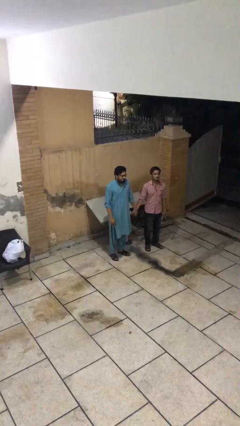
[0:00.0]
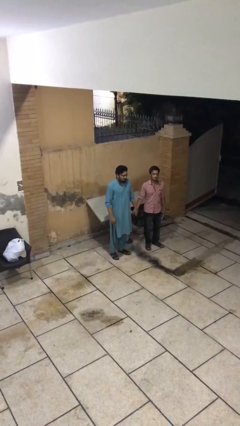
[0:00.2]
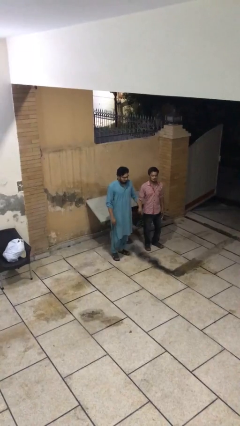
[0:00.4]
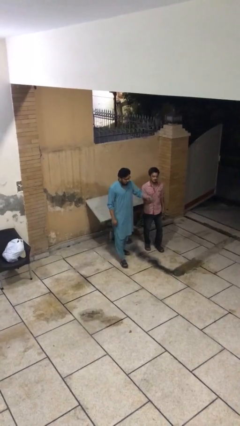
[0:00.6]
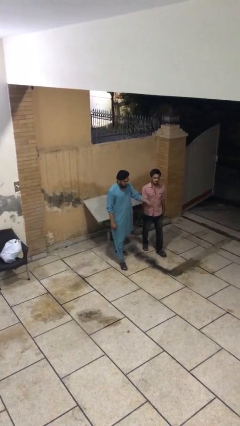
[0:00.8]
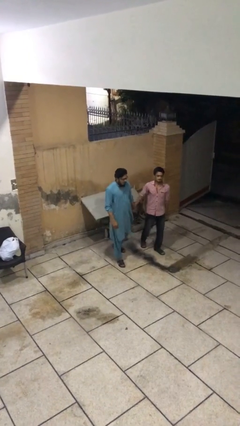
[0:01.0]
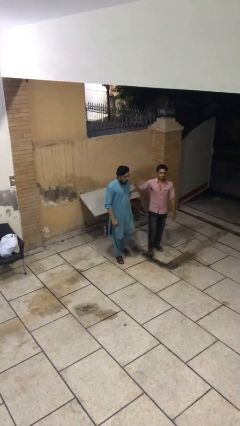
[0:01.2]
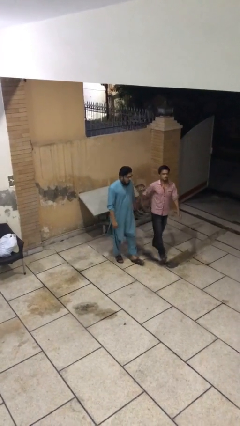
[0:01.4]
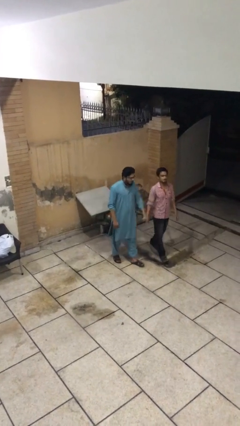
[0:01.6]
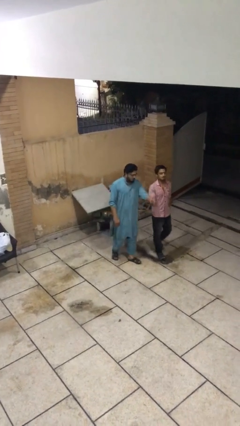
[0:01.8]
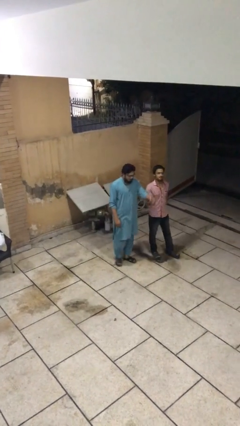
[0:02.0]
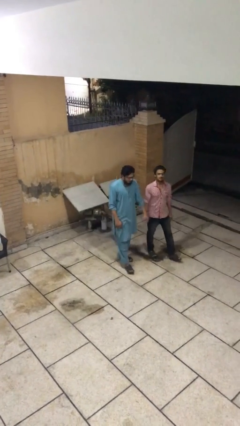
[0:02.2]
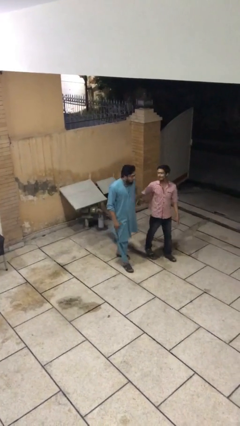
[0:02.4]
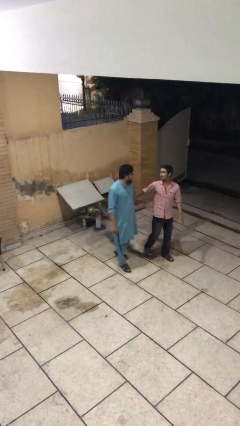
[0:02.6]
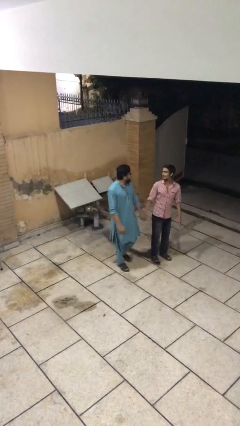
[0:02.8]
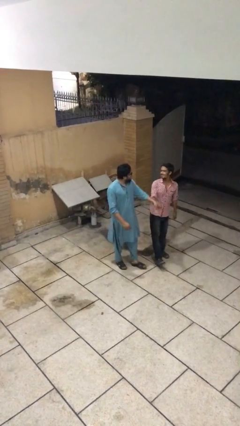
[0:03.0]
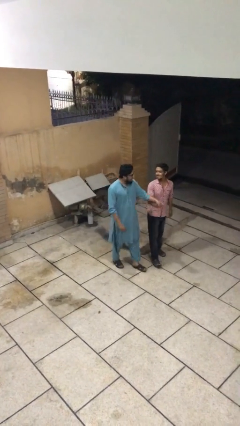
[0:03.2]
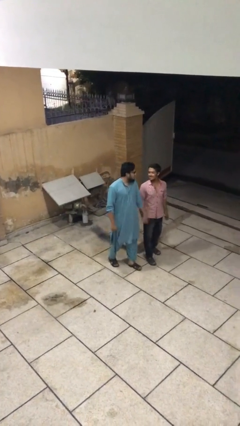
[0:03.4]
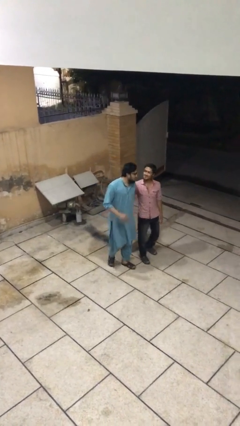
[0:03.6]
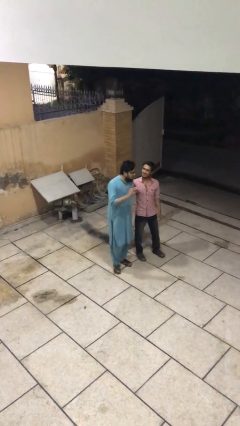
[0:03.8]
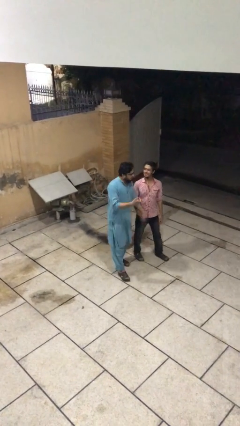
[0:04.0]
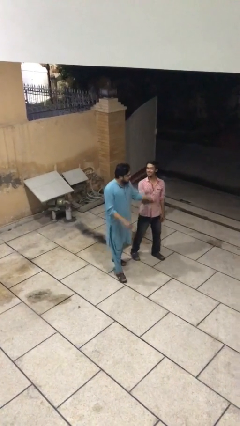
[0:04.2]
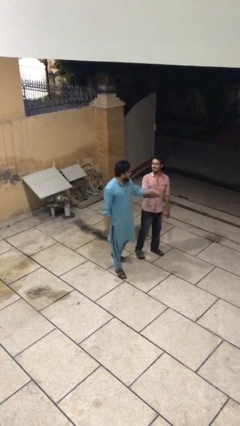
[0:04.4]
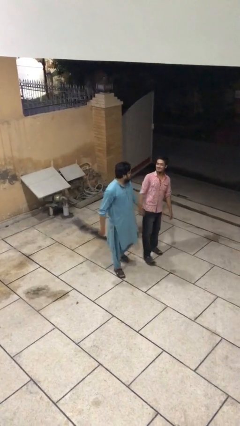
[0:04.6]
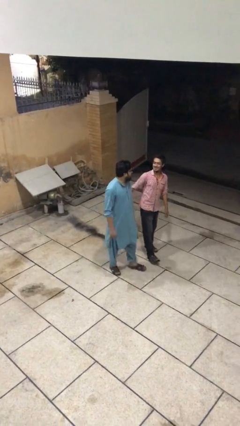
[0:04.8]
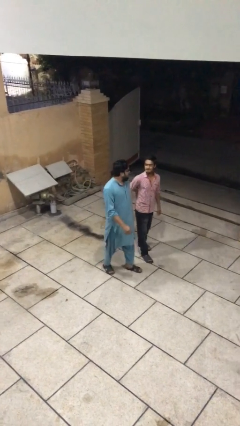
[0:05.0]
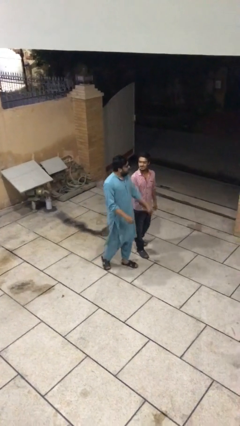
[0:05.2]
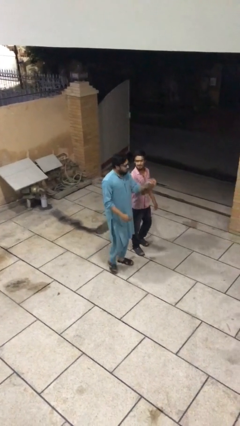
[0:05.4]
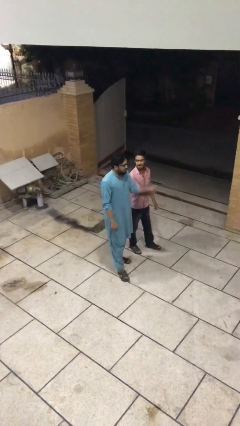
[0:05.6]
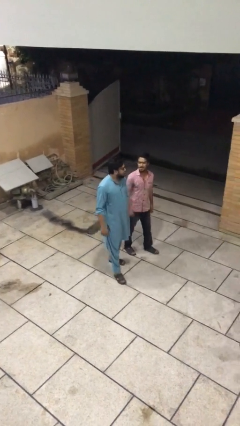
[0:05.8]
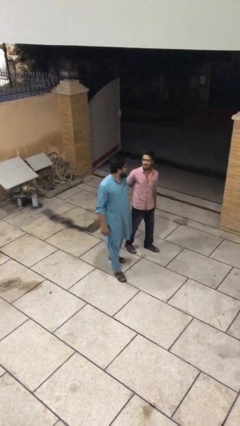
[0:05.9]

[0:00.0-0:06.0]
person holds hand

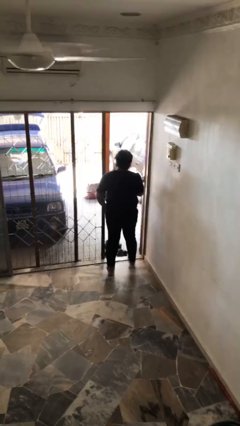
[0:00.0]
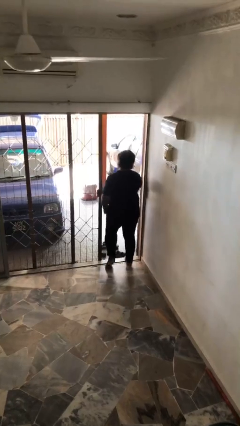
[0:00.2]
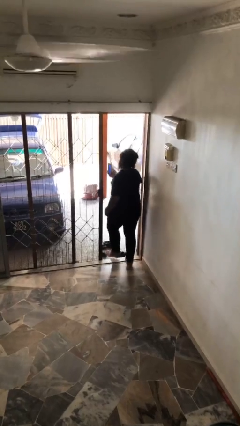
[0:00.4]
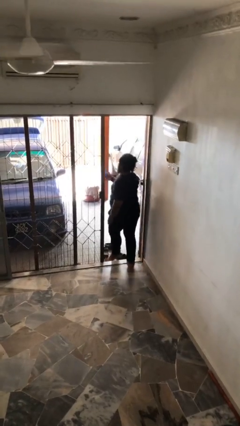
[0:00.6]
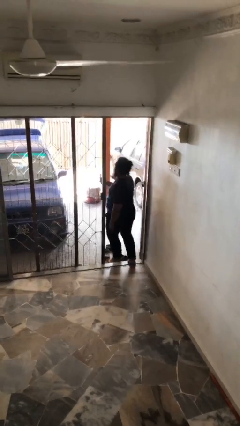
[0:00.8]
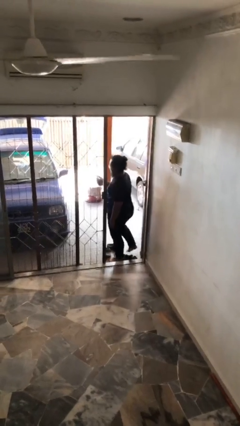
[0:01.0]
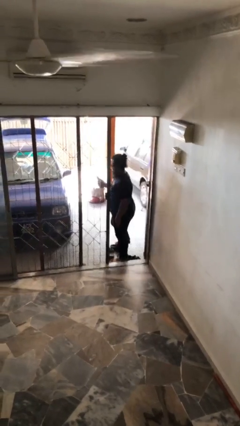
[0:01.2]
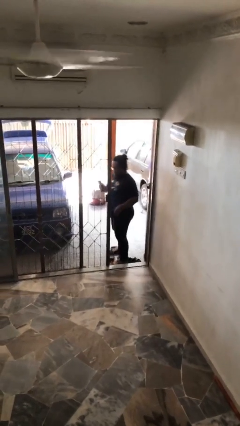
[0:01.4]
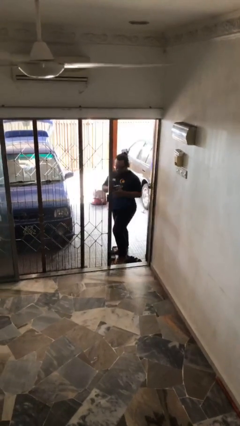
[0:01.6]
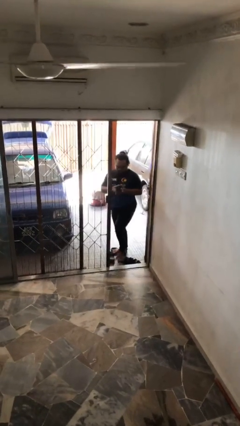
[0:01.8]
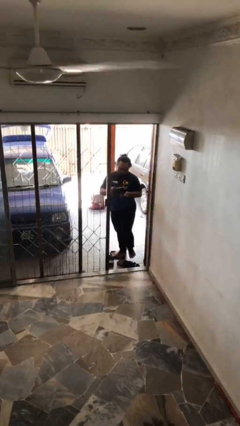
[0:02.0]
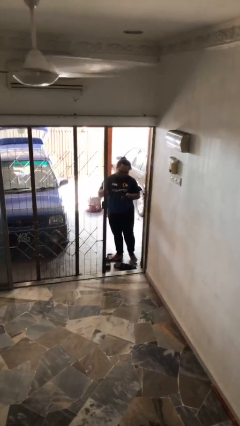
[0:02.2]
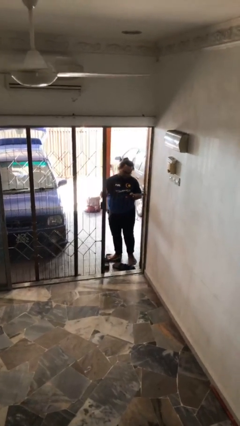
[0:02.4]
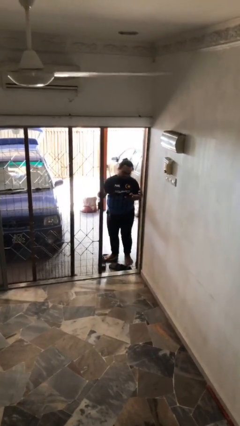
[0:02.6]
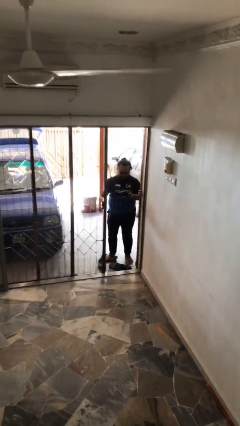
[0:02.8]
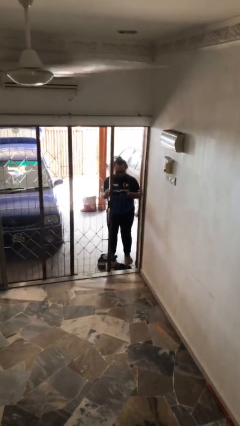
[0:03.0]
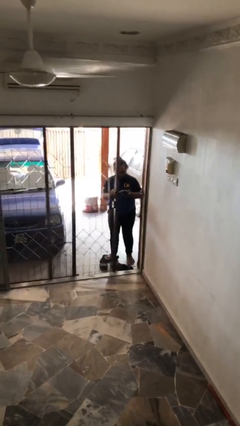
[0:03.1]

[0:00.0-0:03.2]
person exits scene through structure

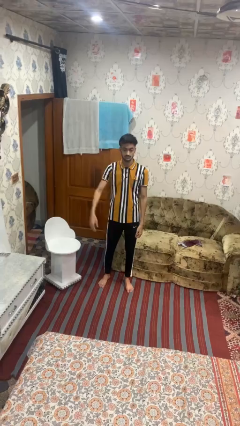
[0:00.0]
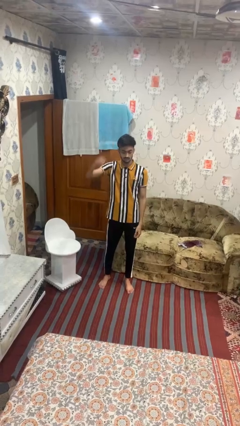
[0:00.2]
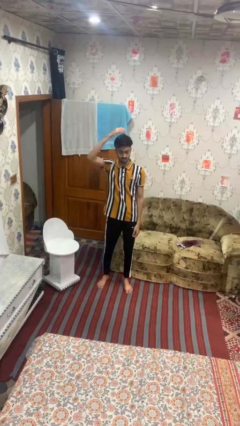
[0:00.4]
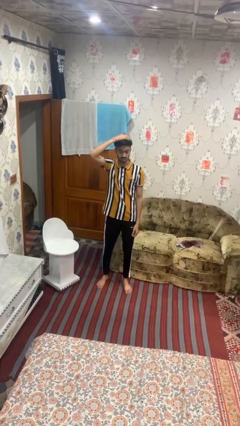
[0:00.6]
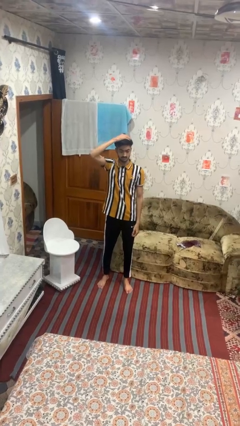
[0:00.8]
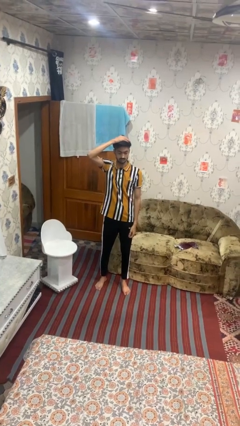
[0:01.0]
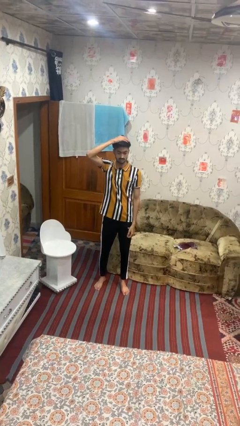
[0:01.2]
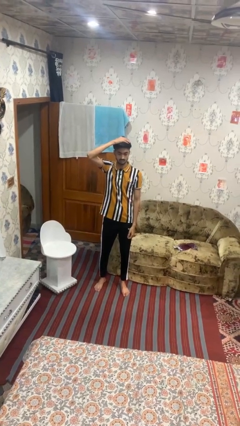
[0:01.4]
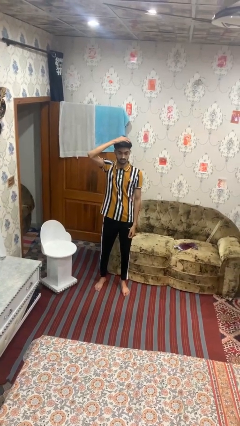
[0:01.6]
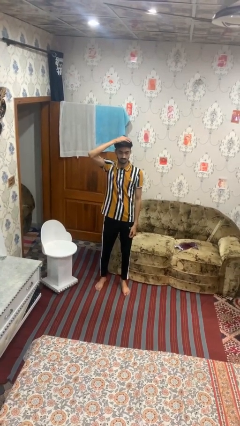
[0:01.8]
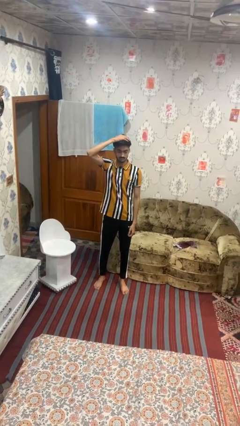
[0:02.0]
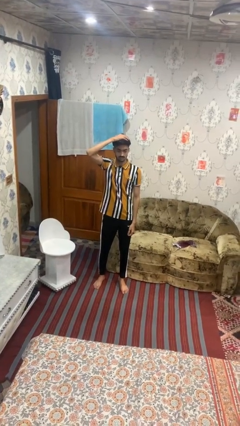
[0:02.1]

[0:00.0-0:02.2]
person pats head

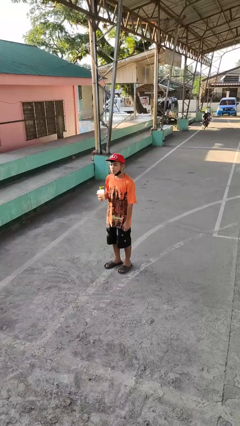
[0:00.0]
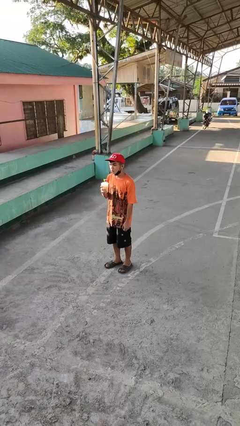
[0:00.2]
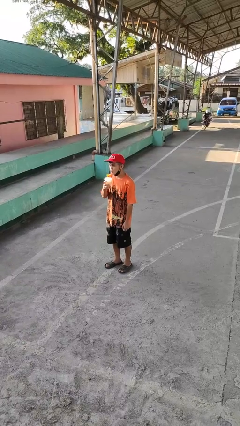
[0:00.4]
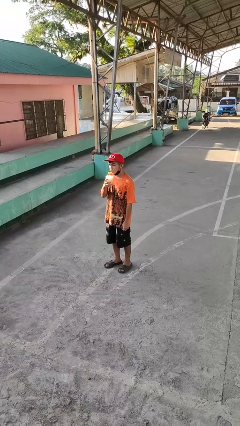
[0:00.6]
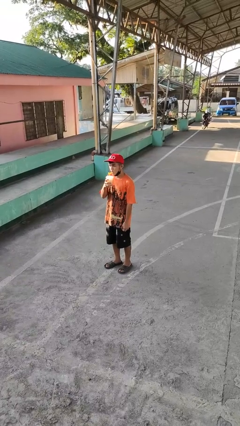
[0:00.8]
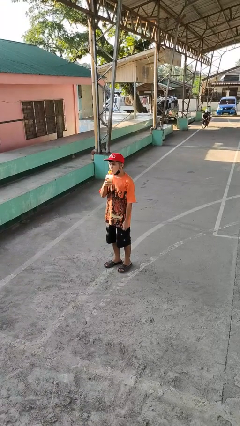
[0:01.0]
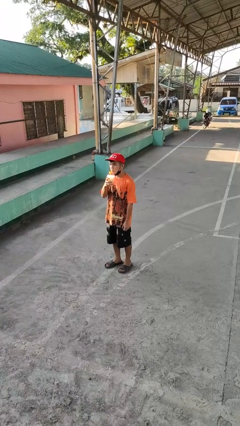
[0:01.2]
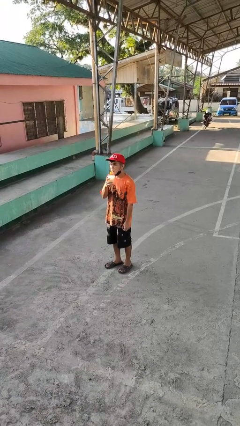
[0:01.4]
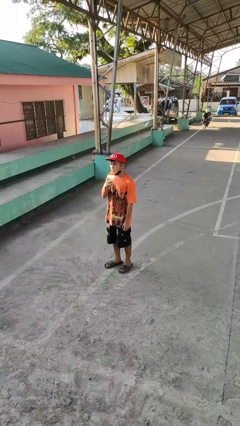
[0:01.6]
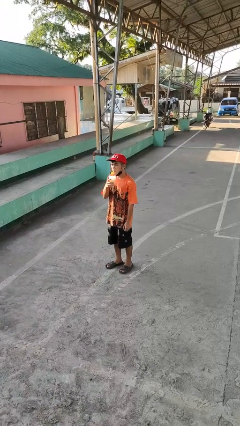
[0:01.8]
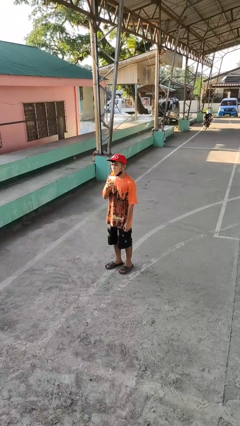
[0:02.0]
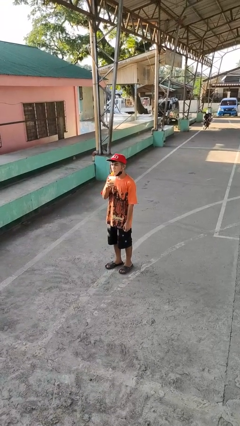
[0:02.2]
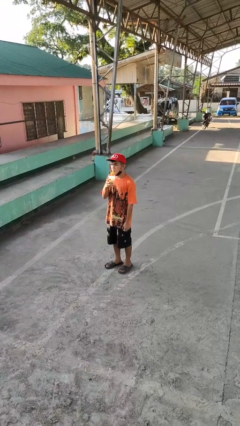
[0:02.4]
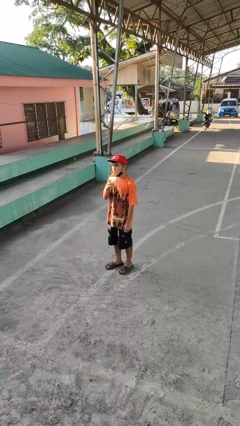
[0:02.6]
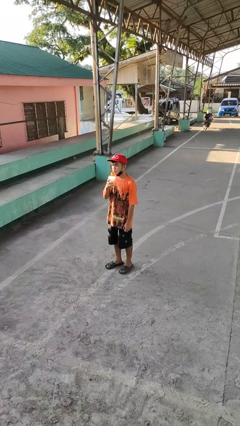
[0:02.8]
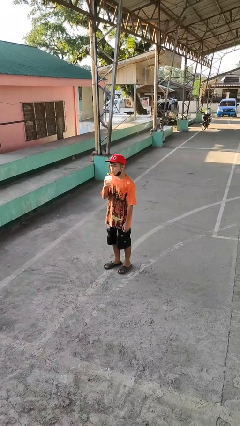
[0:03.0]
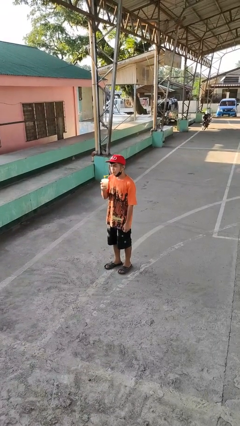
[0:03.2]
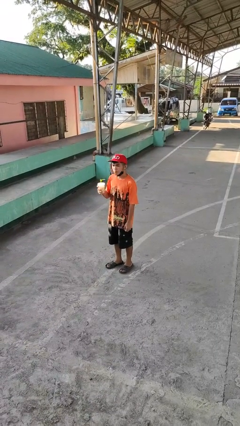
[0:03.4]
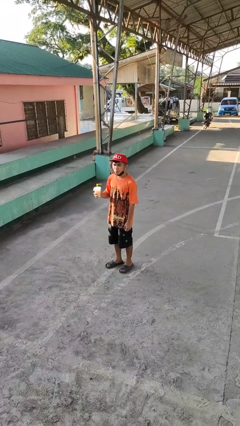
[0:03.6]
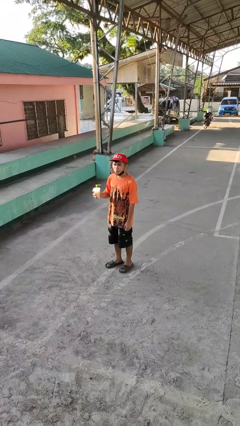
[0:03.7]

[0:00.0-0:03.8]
person drinks from straw

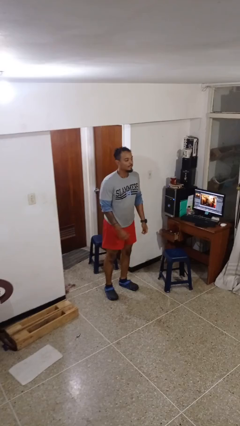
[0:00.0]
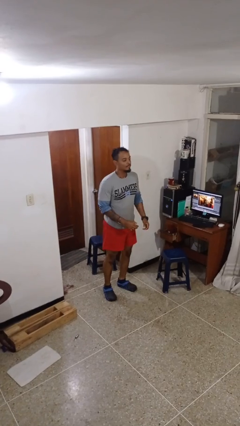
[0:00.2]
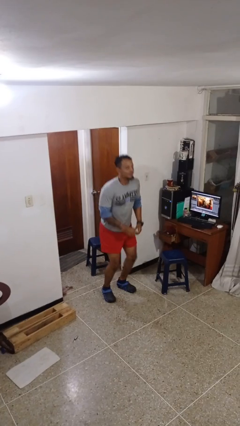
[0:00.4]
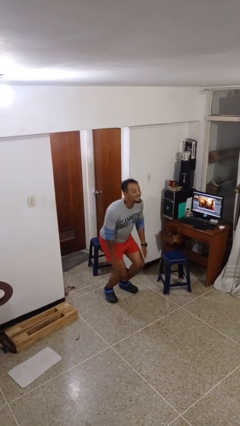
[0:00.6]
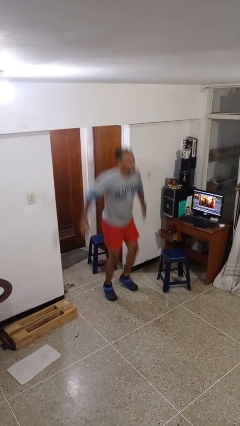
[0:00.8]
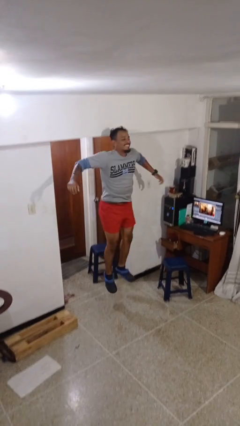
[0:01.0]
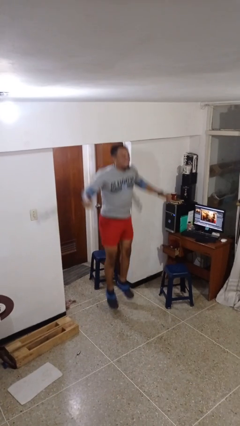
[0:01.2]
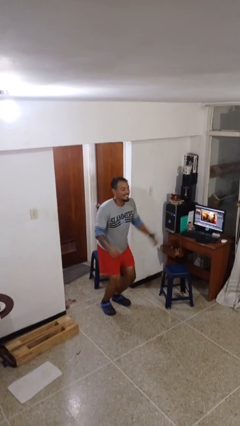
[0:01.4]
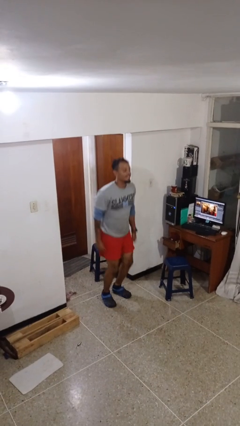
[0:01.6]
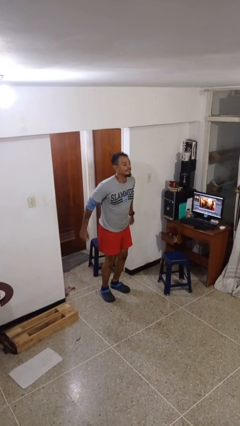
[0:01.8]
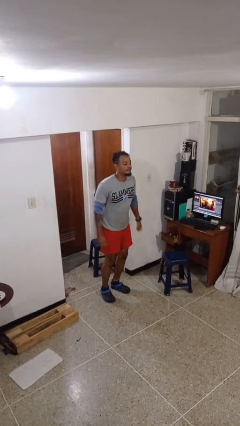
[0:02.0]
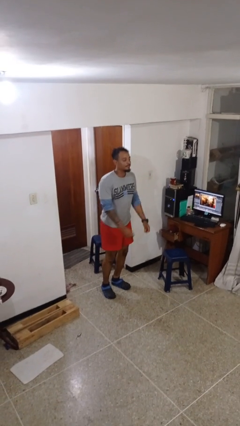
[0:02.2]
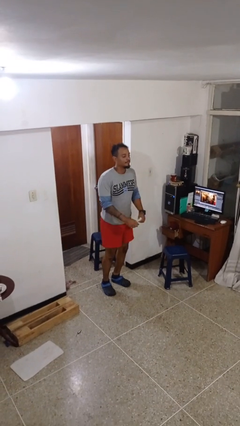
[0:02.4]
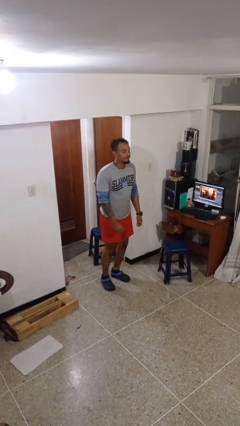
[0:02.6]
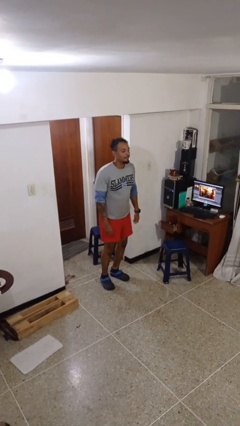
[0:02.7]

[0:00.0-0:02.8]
person jumps
